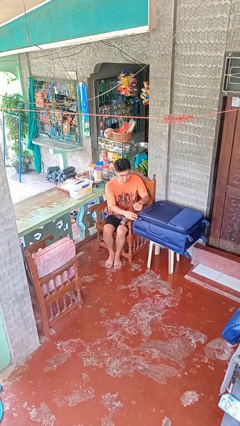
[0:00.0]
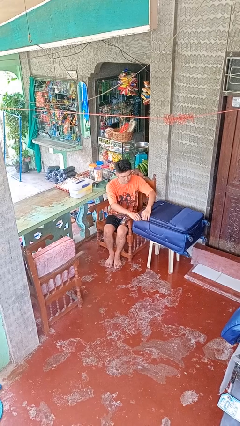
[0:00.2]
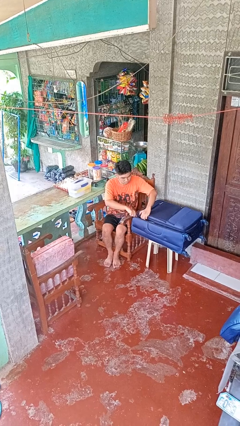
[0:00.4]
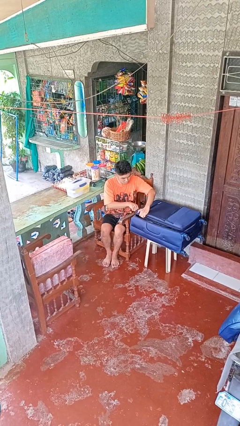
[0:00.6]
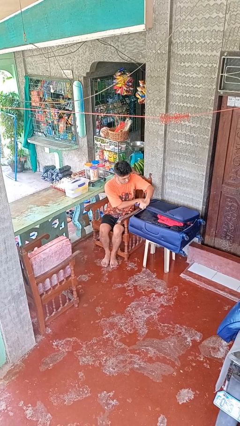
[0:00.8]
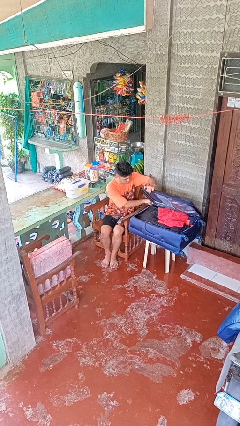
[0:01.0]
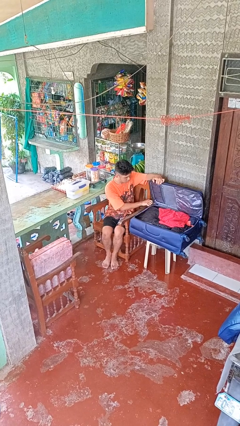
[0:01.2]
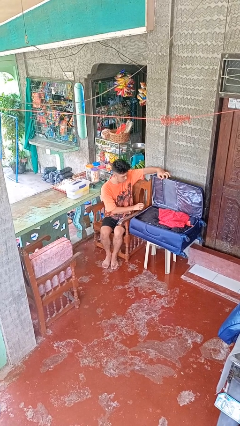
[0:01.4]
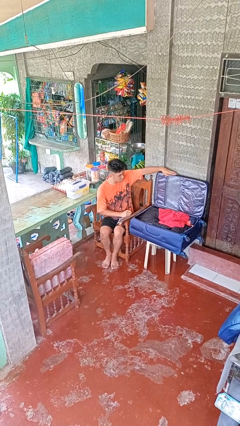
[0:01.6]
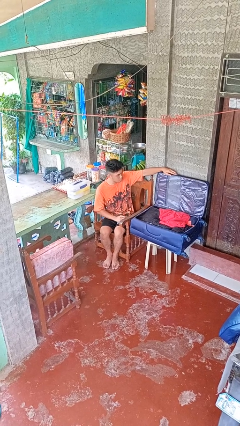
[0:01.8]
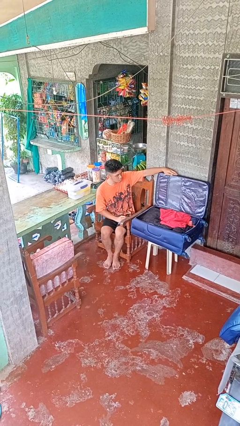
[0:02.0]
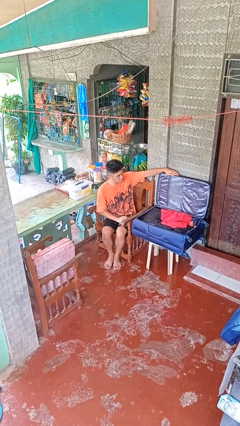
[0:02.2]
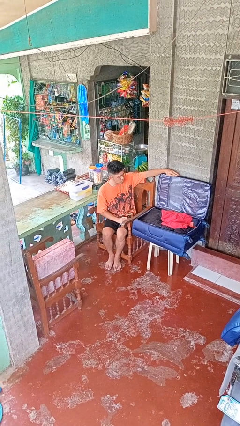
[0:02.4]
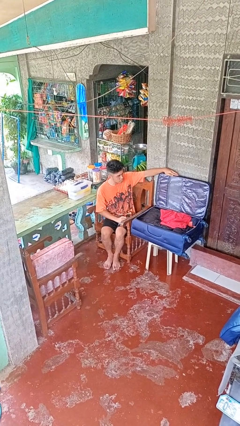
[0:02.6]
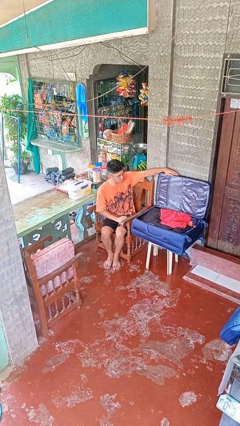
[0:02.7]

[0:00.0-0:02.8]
person opens suitcase

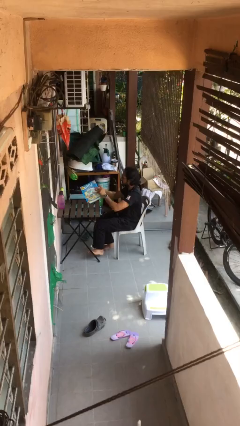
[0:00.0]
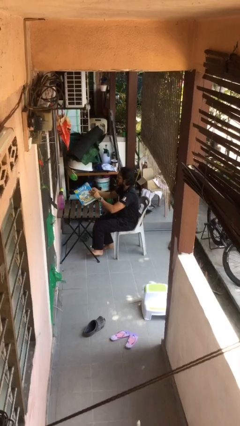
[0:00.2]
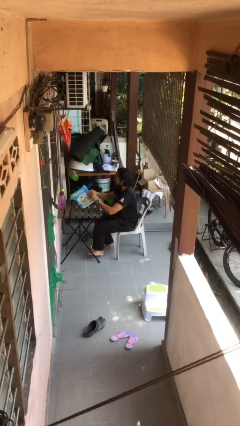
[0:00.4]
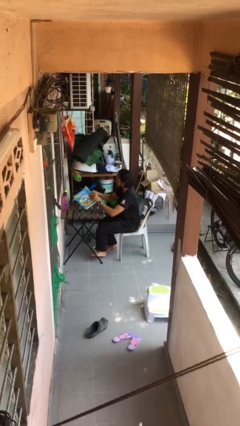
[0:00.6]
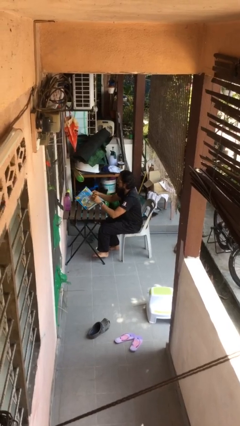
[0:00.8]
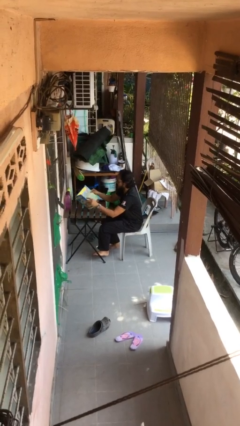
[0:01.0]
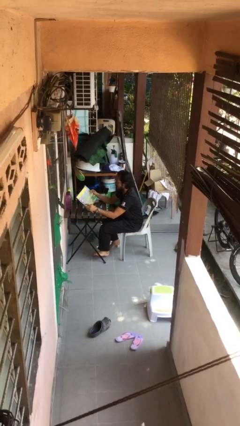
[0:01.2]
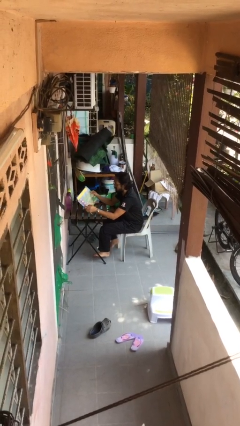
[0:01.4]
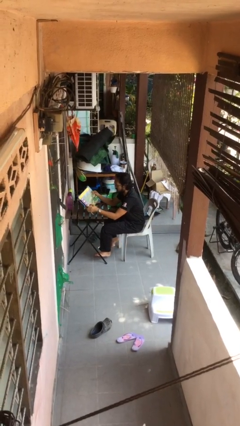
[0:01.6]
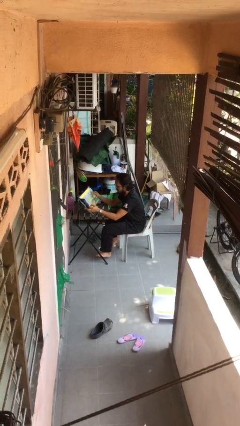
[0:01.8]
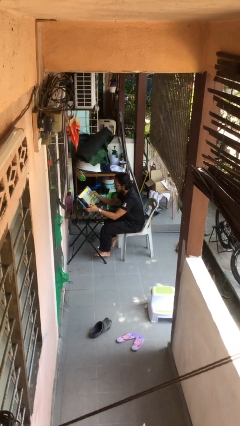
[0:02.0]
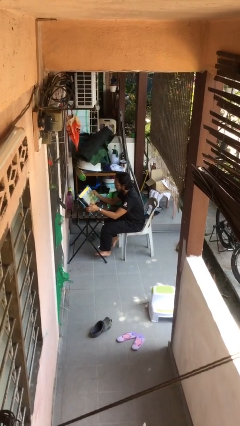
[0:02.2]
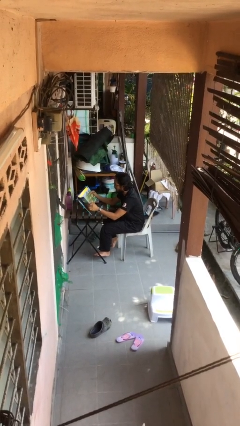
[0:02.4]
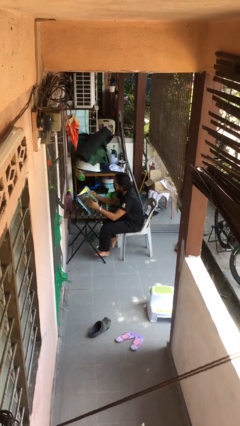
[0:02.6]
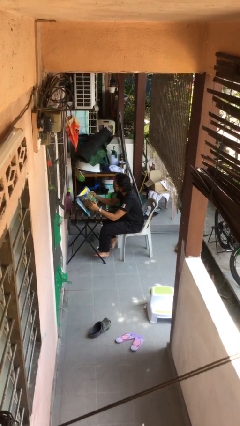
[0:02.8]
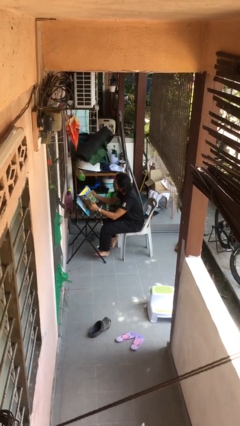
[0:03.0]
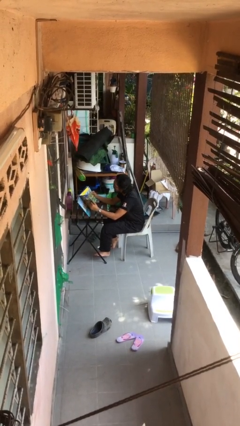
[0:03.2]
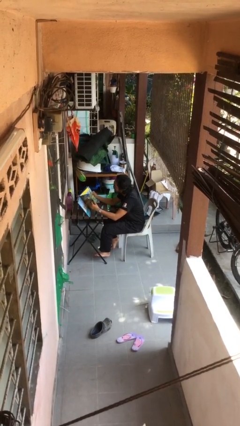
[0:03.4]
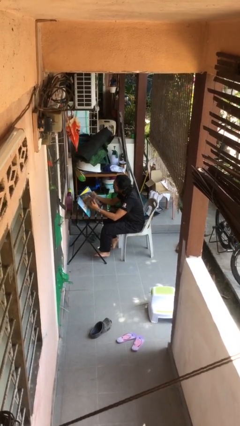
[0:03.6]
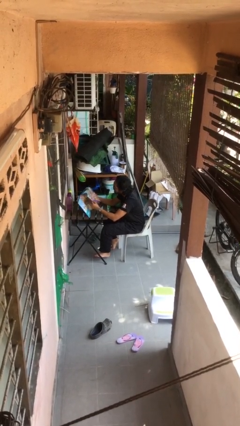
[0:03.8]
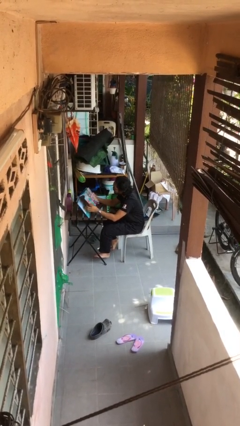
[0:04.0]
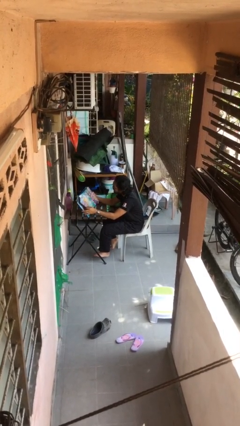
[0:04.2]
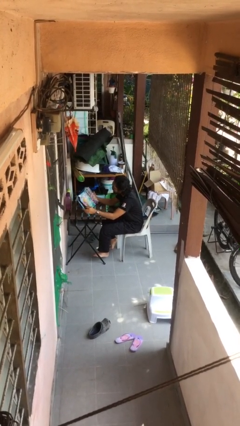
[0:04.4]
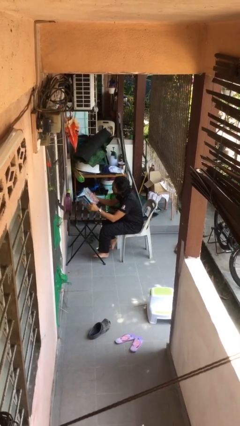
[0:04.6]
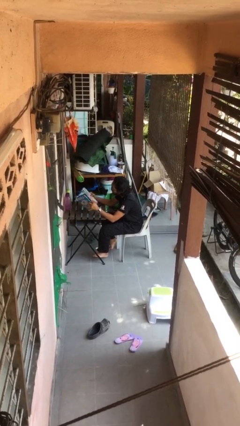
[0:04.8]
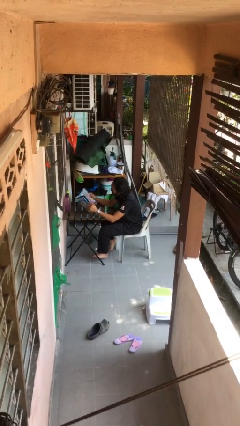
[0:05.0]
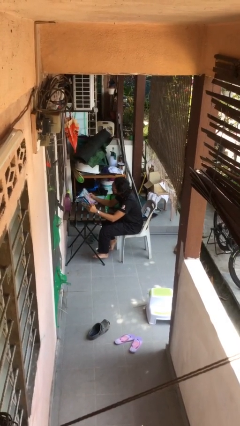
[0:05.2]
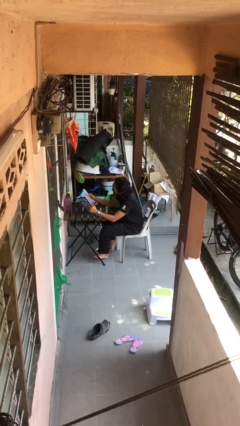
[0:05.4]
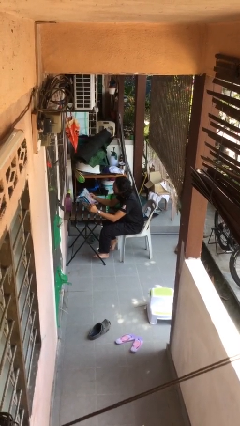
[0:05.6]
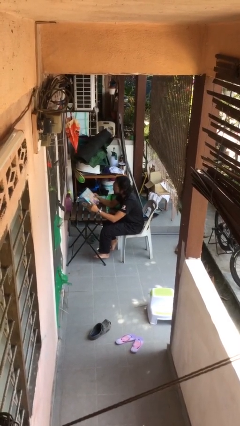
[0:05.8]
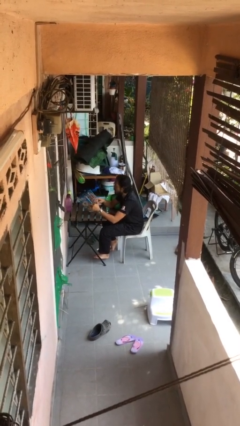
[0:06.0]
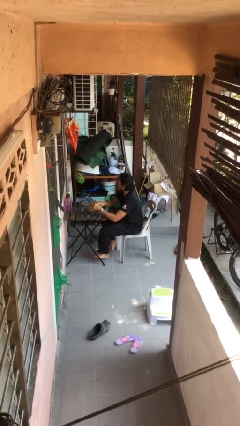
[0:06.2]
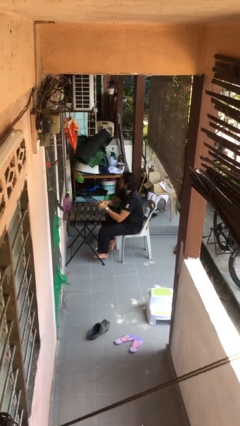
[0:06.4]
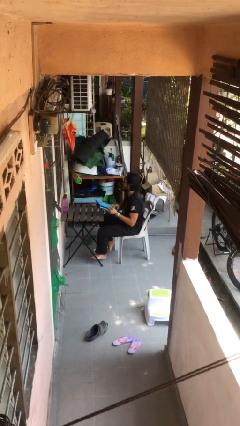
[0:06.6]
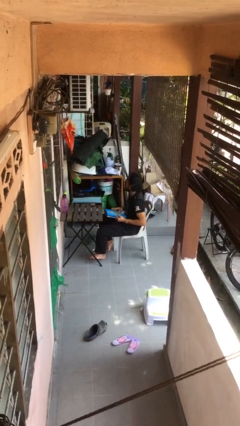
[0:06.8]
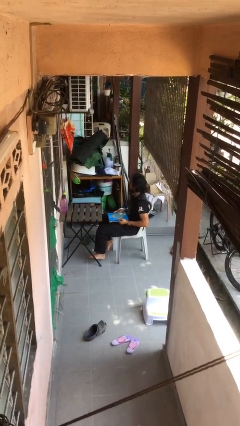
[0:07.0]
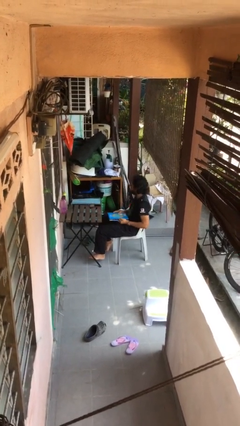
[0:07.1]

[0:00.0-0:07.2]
person reads document

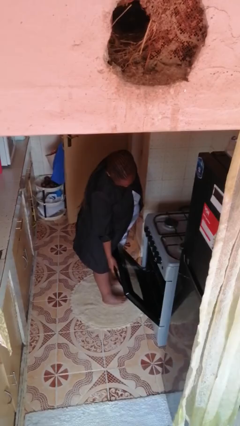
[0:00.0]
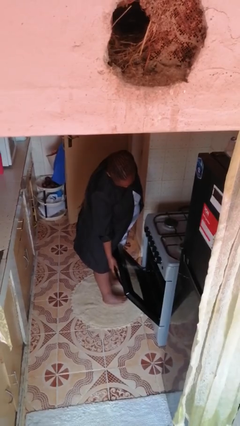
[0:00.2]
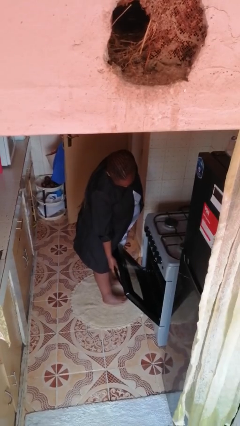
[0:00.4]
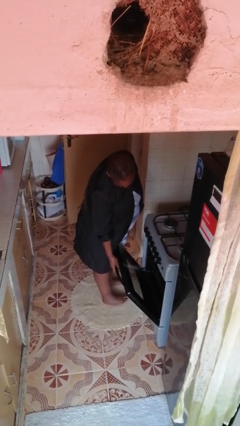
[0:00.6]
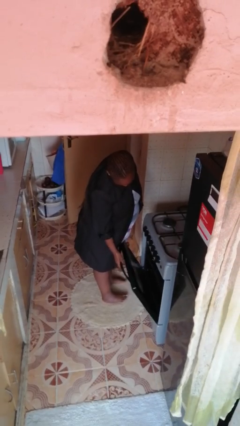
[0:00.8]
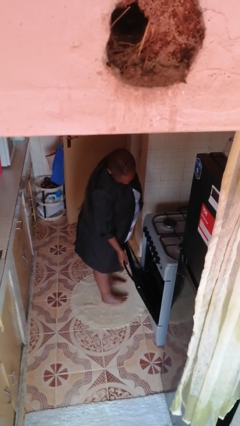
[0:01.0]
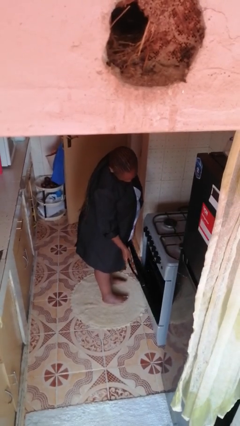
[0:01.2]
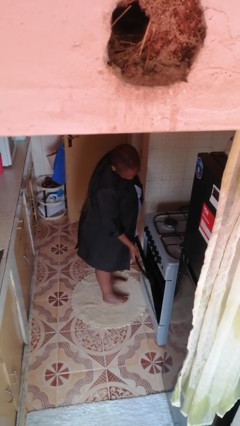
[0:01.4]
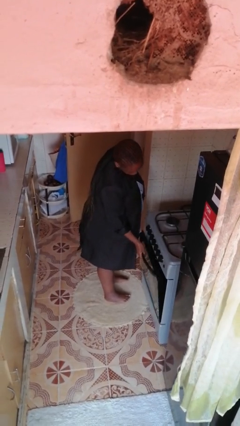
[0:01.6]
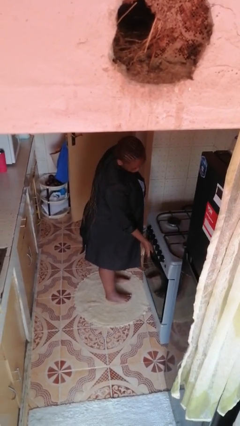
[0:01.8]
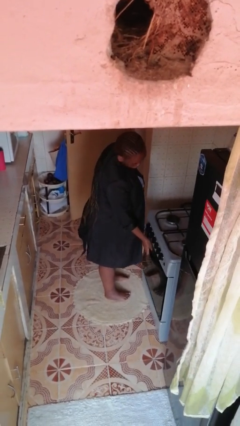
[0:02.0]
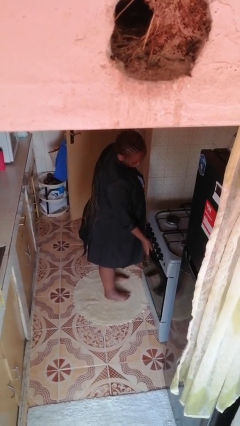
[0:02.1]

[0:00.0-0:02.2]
person closes oven door

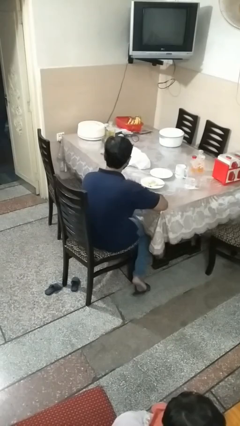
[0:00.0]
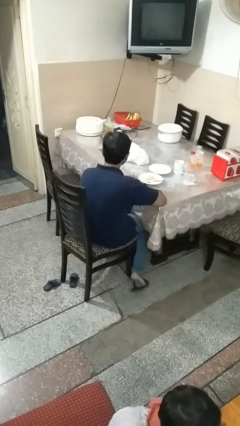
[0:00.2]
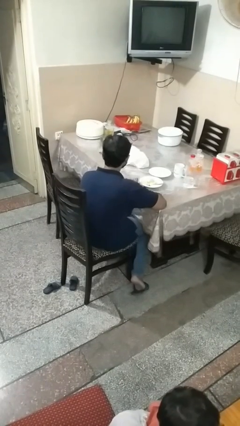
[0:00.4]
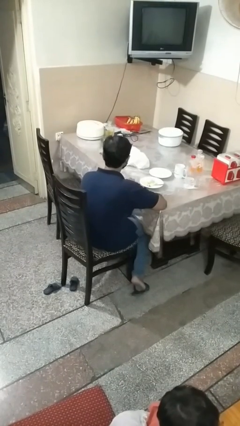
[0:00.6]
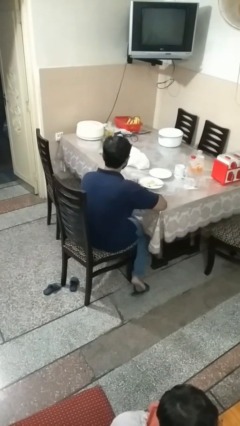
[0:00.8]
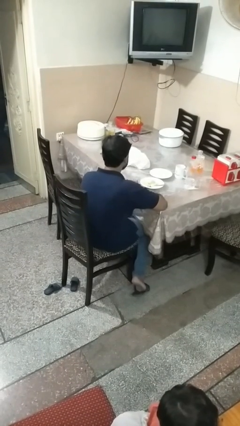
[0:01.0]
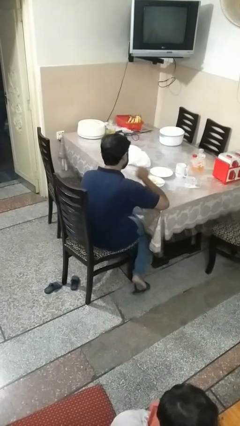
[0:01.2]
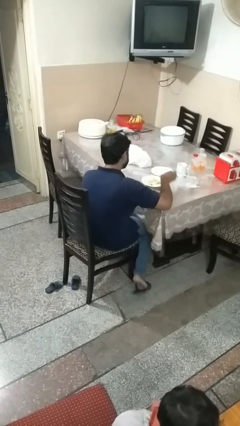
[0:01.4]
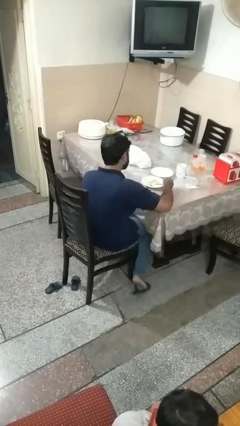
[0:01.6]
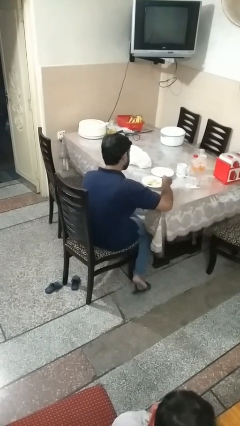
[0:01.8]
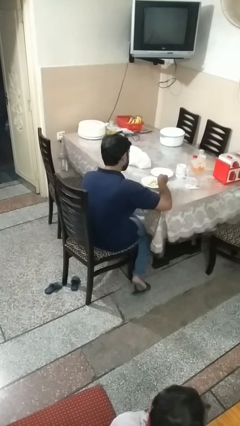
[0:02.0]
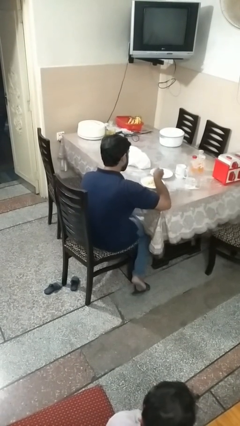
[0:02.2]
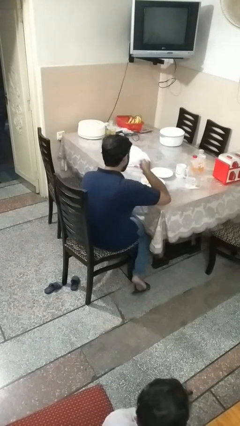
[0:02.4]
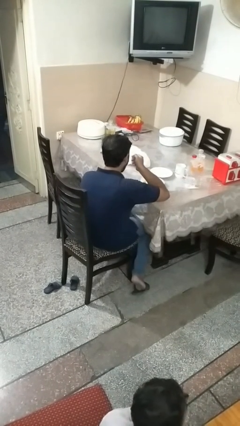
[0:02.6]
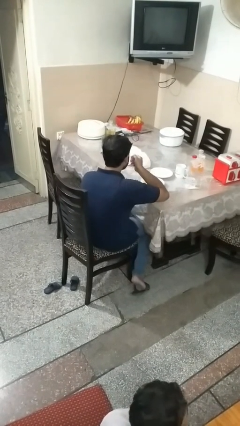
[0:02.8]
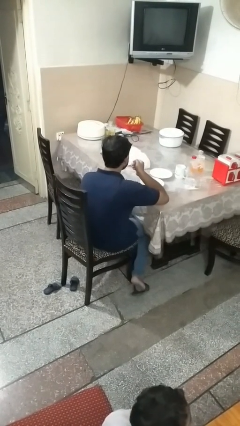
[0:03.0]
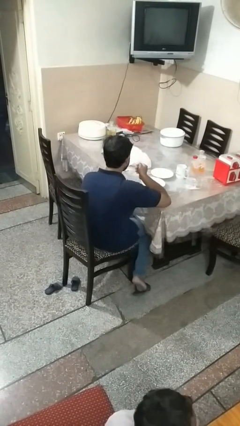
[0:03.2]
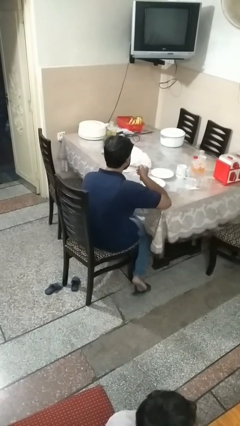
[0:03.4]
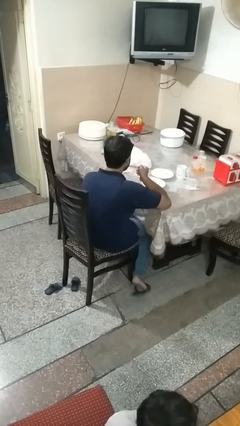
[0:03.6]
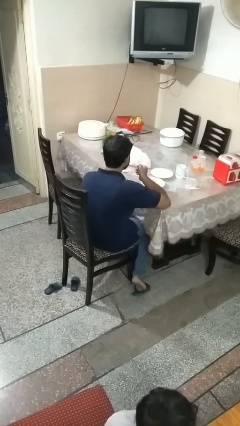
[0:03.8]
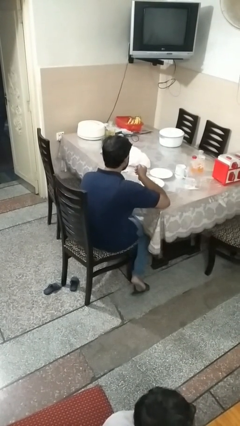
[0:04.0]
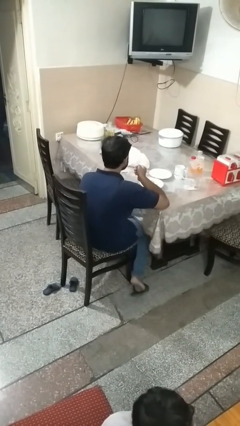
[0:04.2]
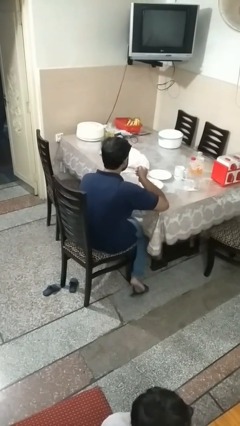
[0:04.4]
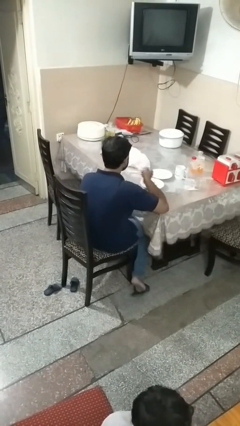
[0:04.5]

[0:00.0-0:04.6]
person eats with utensil

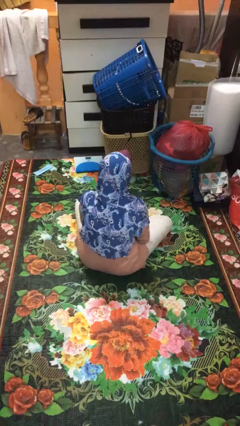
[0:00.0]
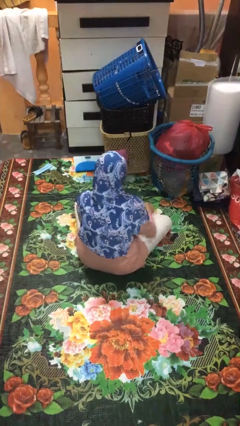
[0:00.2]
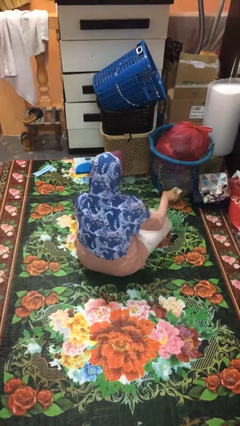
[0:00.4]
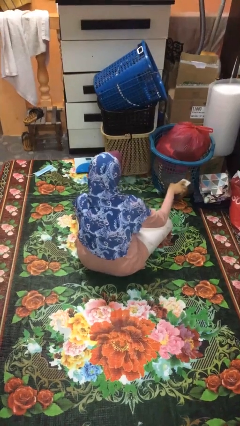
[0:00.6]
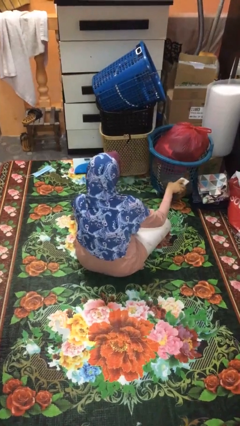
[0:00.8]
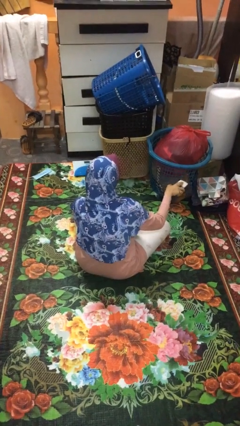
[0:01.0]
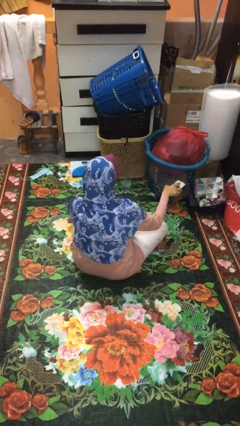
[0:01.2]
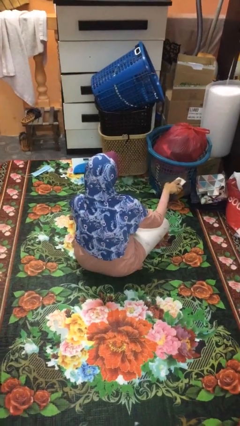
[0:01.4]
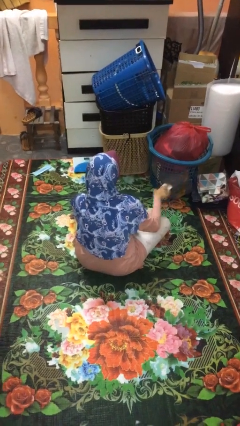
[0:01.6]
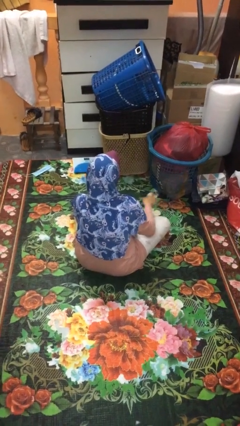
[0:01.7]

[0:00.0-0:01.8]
person uses television remote
